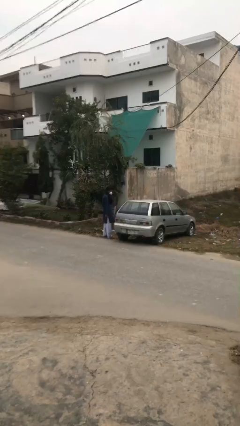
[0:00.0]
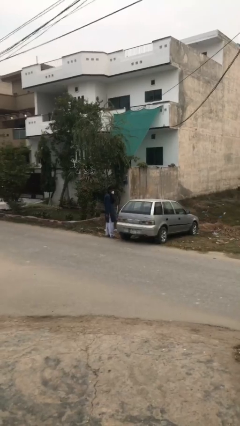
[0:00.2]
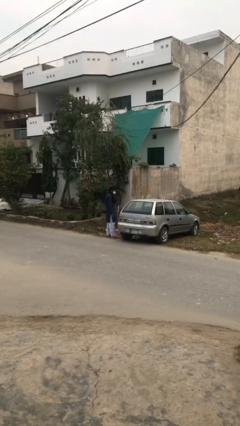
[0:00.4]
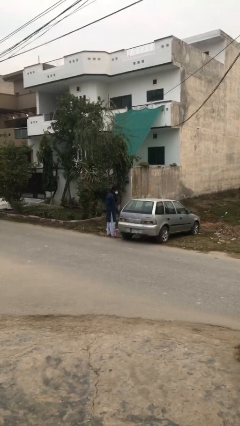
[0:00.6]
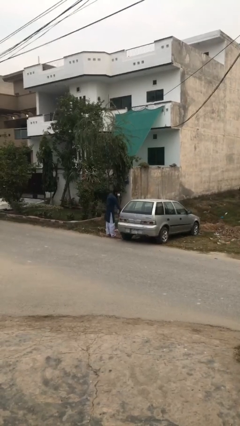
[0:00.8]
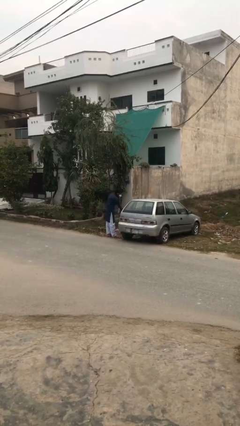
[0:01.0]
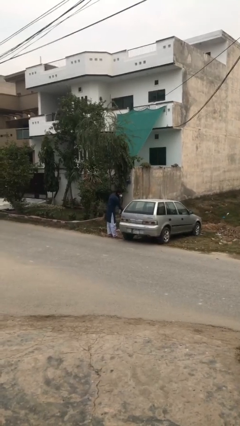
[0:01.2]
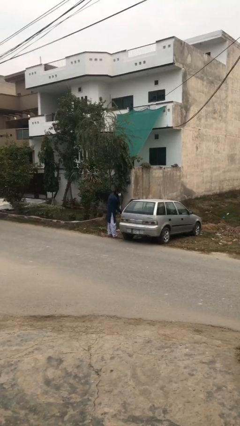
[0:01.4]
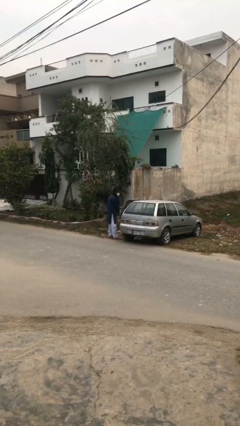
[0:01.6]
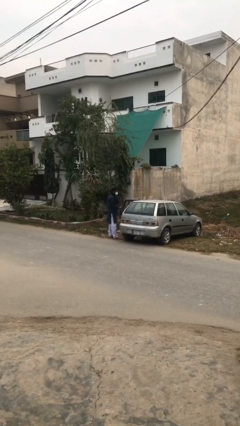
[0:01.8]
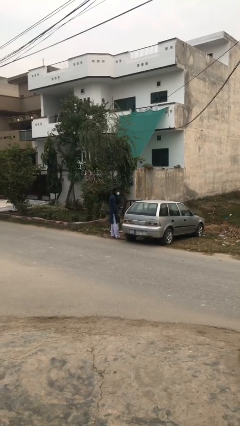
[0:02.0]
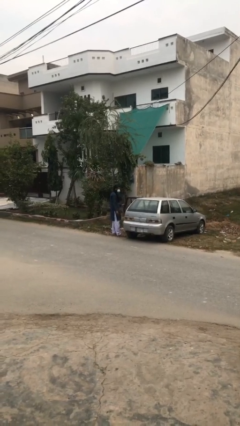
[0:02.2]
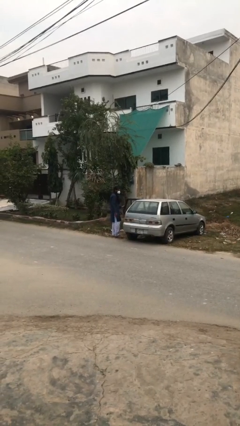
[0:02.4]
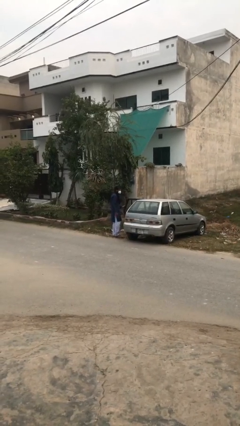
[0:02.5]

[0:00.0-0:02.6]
person opens car door

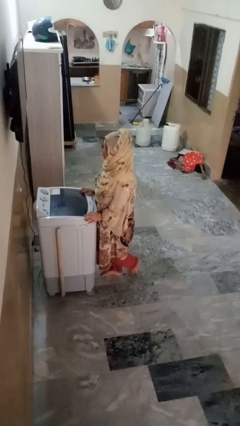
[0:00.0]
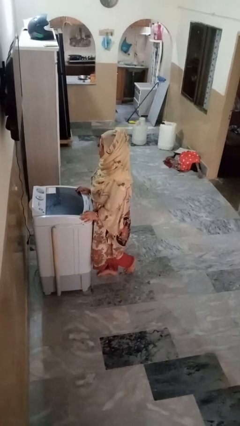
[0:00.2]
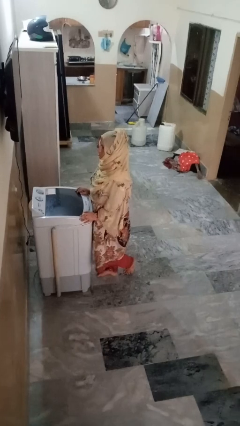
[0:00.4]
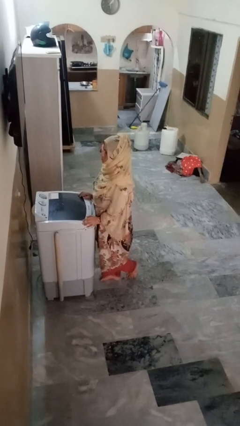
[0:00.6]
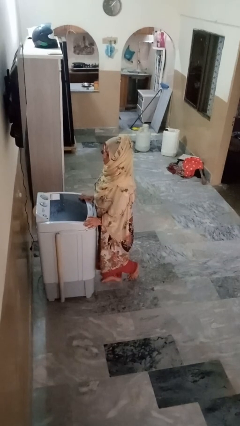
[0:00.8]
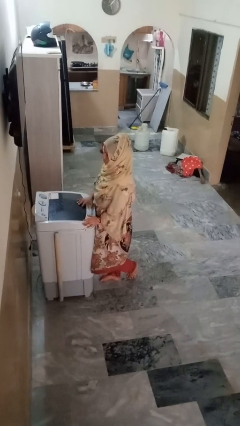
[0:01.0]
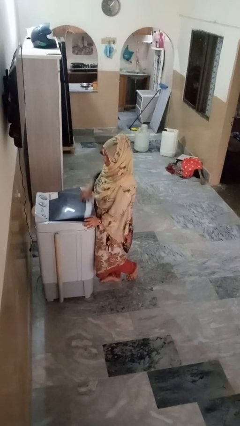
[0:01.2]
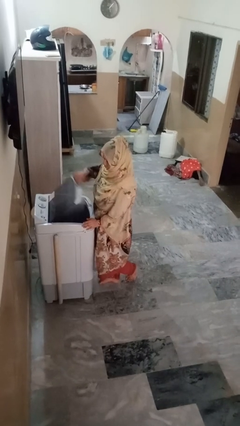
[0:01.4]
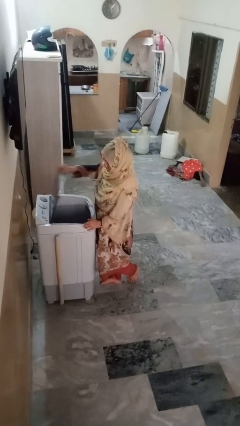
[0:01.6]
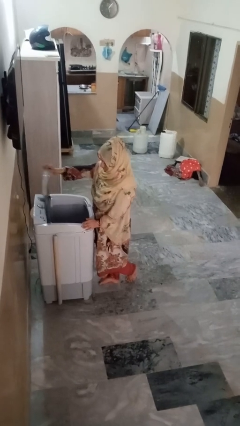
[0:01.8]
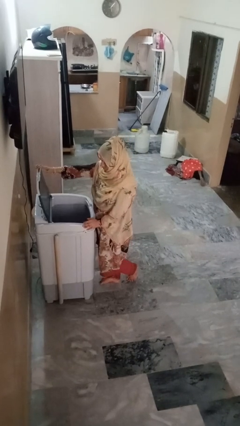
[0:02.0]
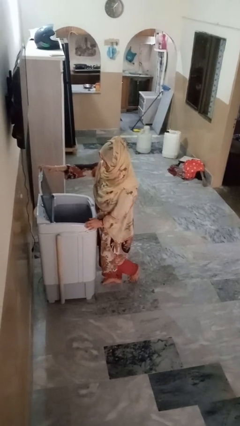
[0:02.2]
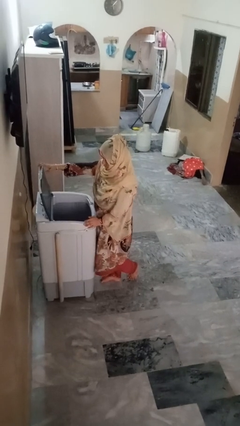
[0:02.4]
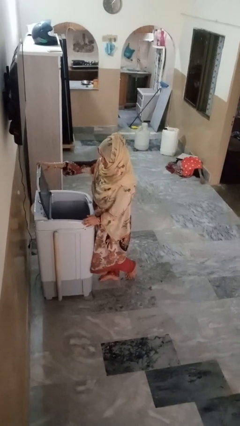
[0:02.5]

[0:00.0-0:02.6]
person opens clothes washer

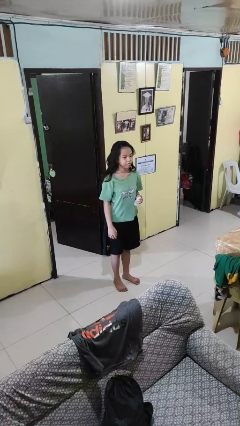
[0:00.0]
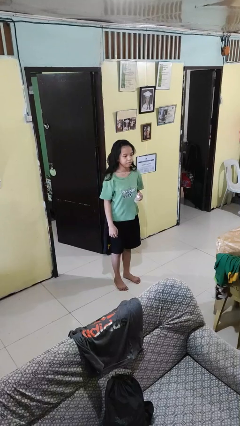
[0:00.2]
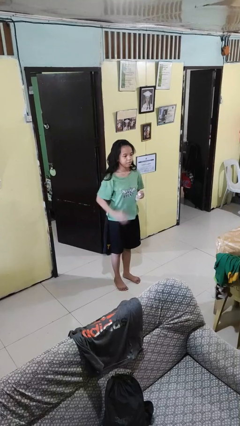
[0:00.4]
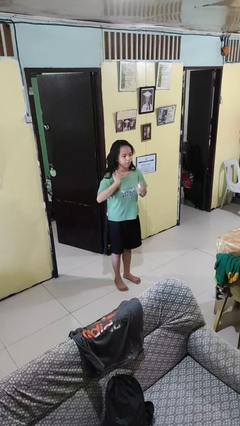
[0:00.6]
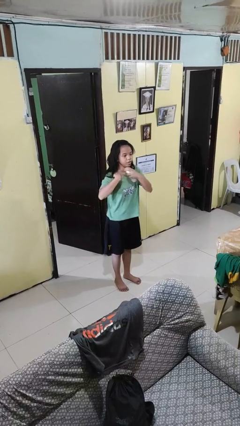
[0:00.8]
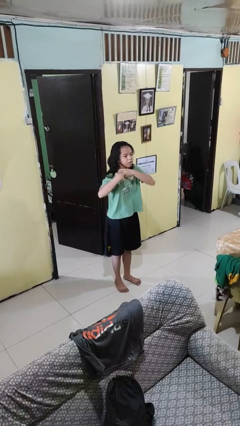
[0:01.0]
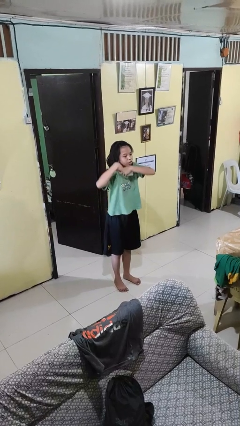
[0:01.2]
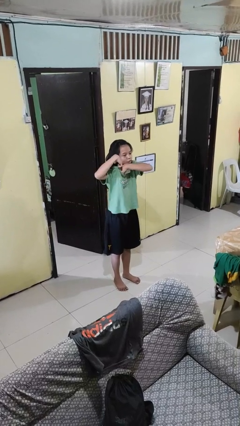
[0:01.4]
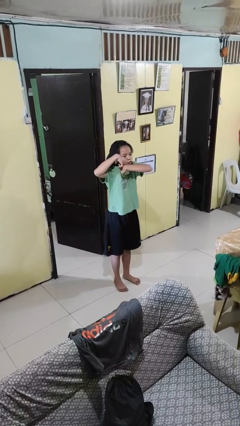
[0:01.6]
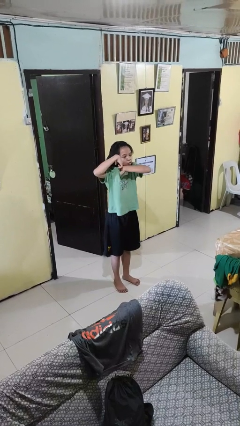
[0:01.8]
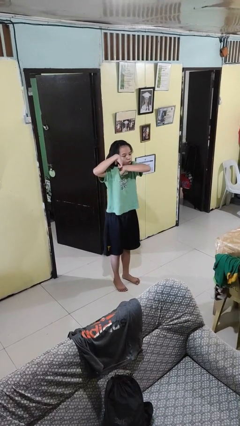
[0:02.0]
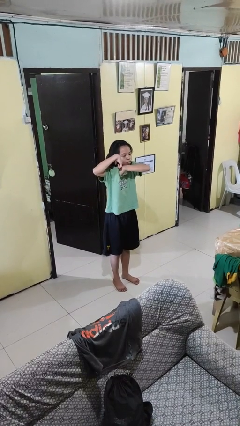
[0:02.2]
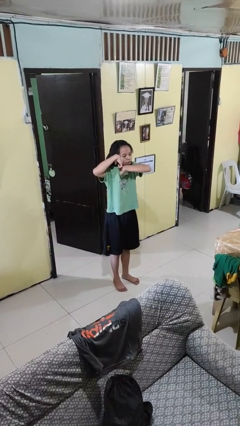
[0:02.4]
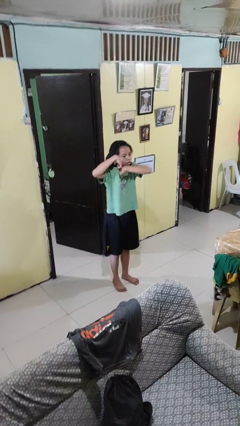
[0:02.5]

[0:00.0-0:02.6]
person applies deodorant

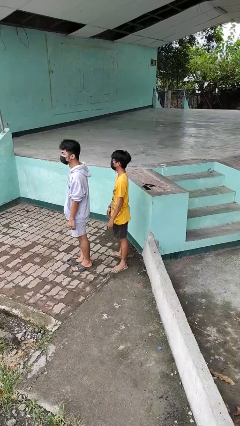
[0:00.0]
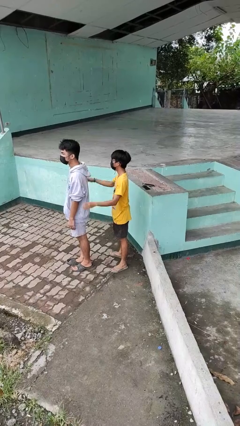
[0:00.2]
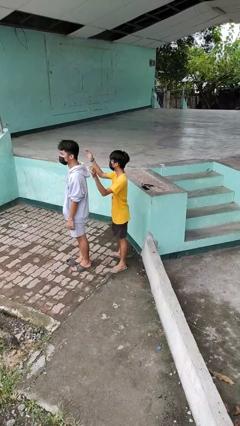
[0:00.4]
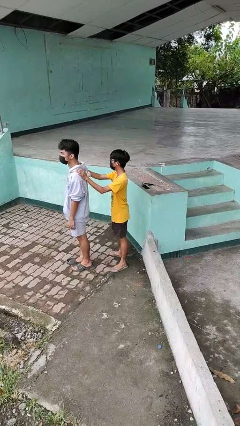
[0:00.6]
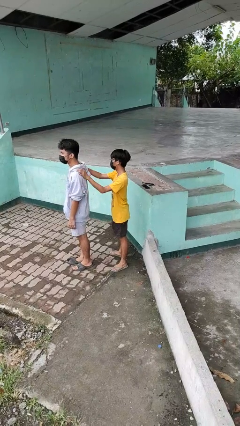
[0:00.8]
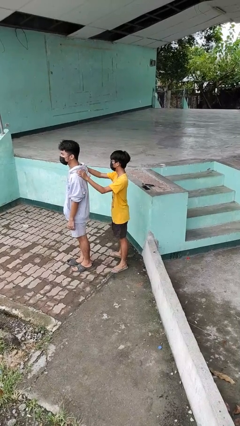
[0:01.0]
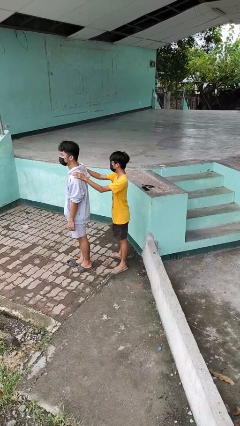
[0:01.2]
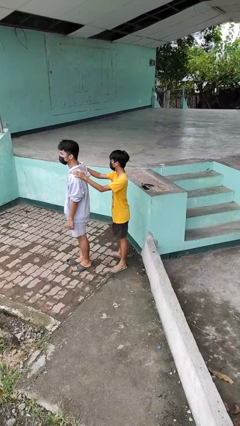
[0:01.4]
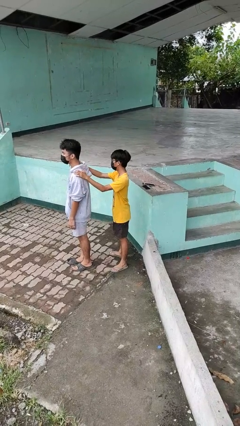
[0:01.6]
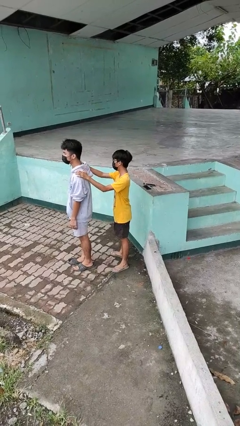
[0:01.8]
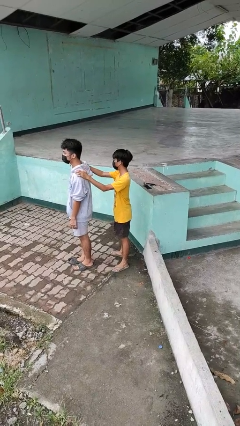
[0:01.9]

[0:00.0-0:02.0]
person grabs person by shoulder

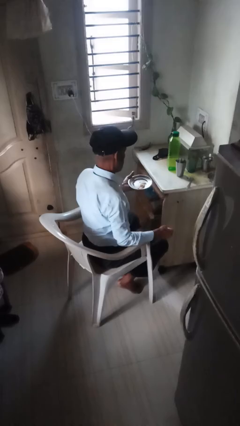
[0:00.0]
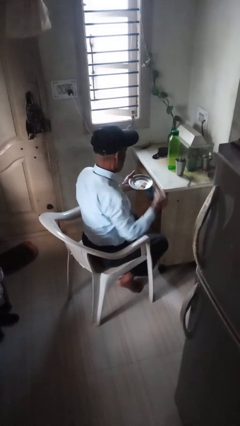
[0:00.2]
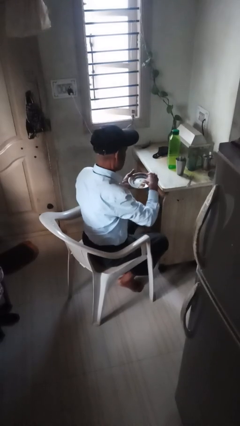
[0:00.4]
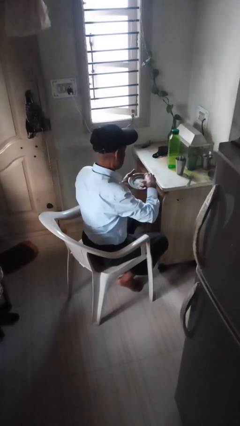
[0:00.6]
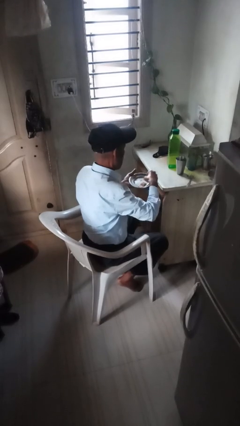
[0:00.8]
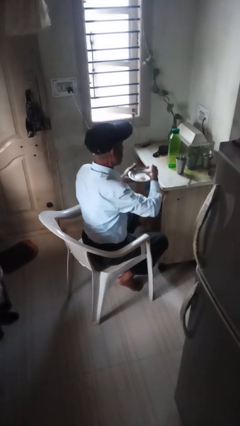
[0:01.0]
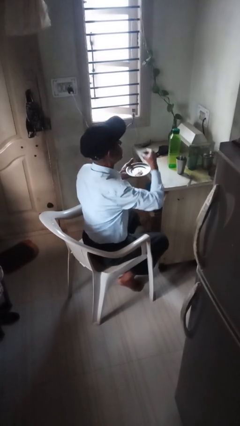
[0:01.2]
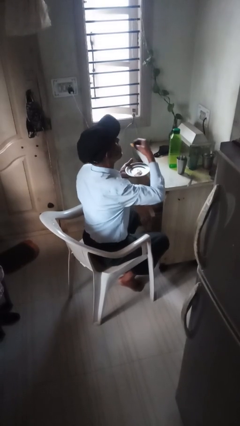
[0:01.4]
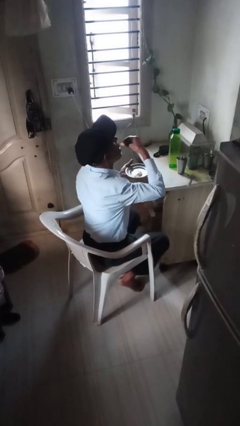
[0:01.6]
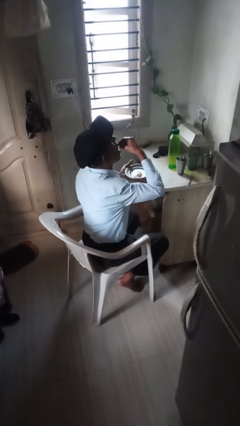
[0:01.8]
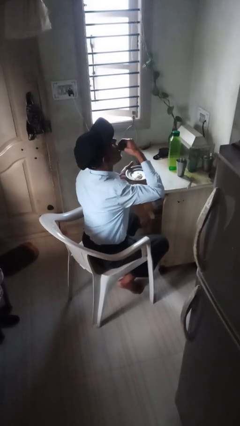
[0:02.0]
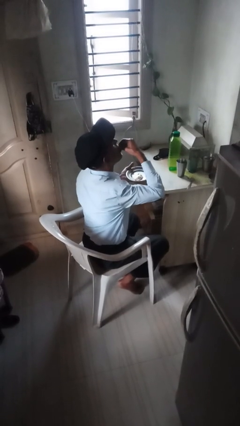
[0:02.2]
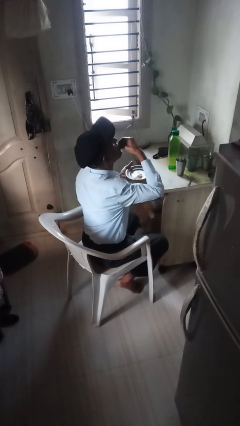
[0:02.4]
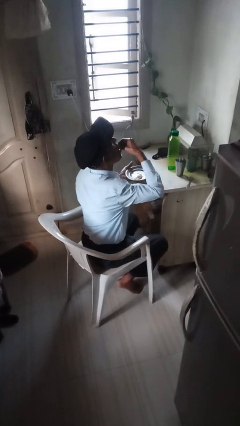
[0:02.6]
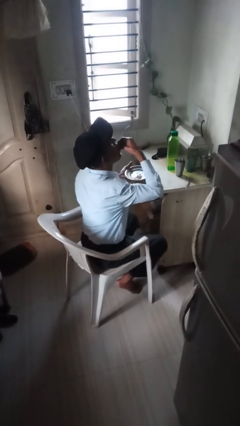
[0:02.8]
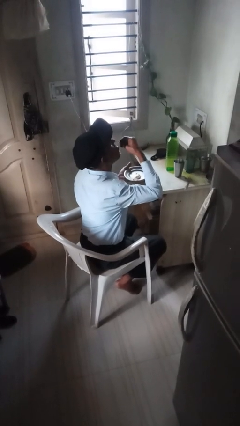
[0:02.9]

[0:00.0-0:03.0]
person eats with hands

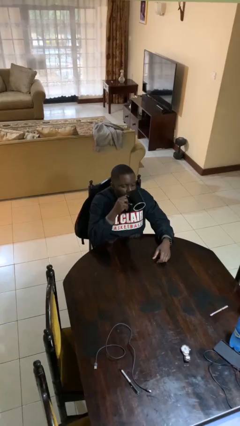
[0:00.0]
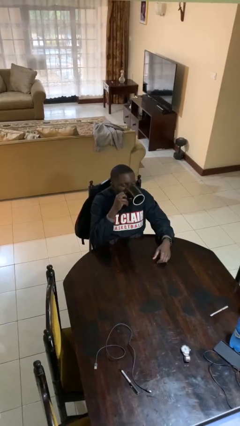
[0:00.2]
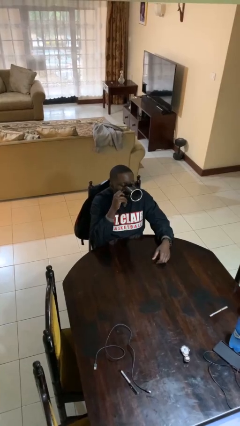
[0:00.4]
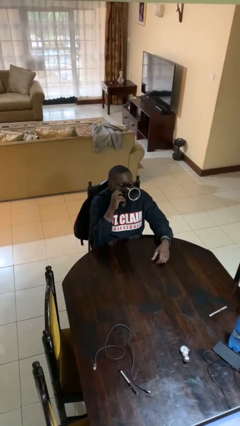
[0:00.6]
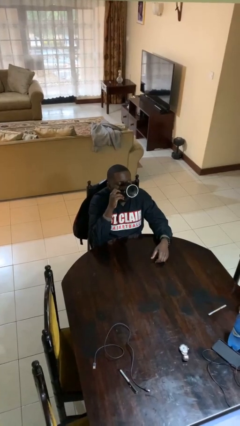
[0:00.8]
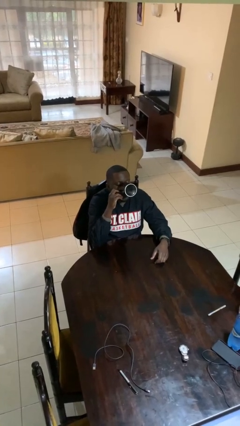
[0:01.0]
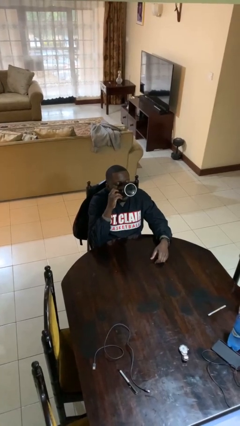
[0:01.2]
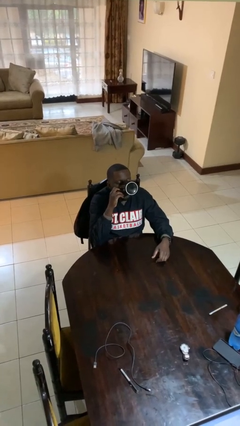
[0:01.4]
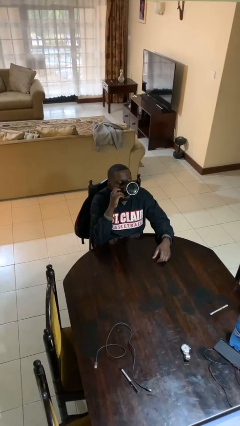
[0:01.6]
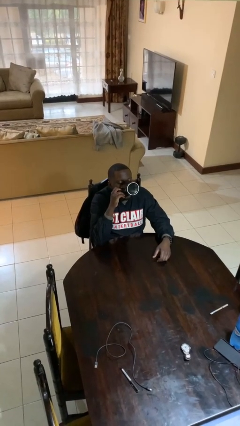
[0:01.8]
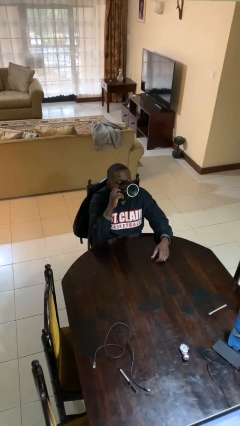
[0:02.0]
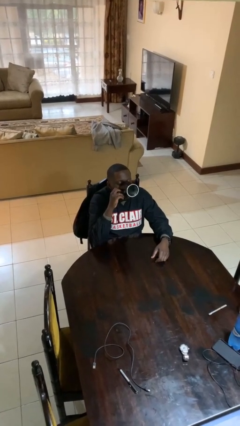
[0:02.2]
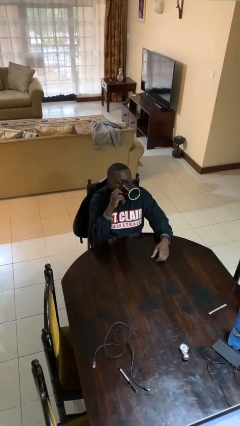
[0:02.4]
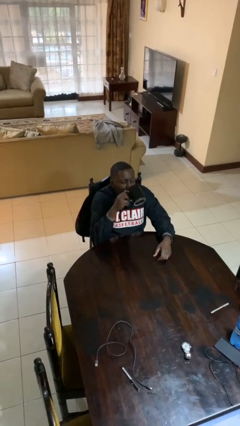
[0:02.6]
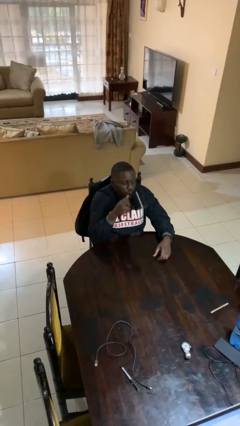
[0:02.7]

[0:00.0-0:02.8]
person drinks from mug

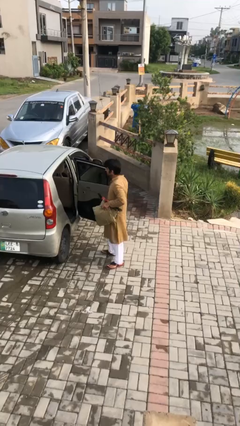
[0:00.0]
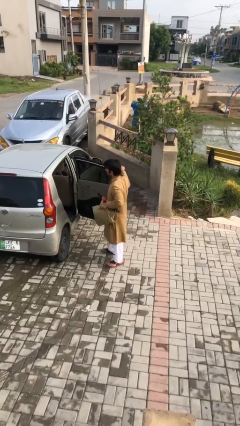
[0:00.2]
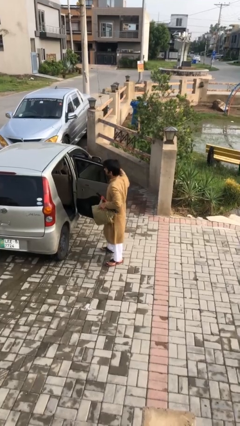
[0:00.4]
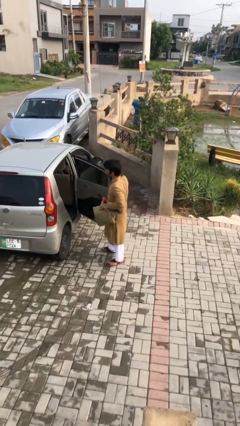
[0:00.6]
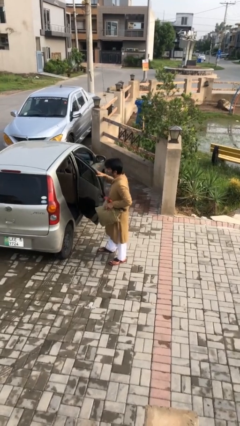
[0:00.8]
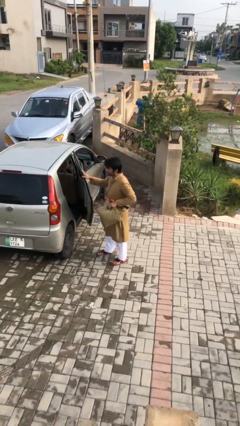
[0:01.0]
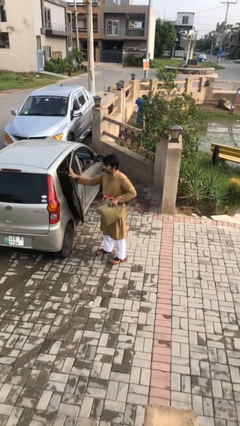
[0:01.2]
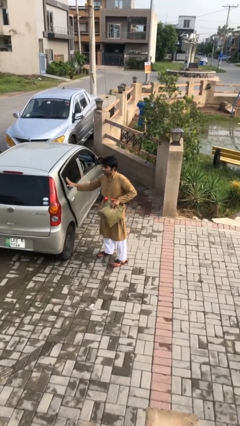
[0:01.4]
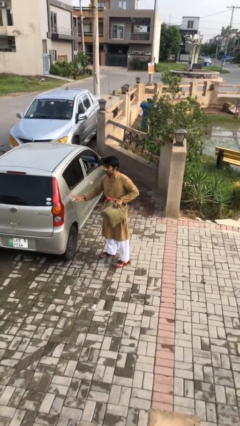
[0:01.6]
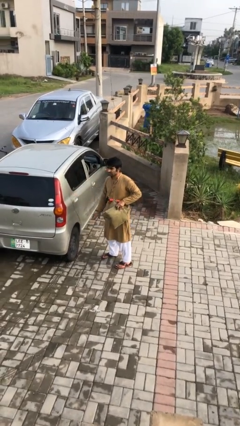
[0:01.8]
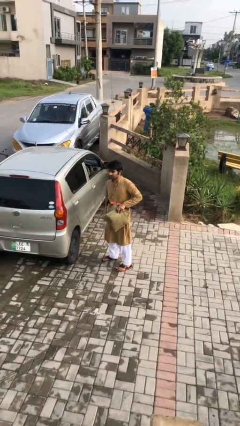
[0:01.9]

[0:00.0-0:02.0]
person closes car door
